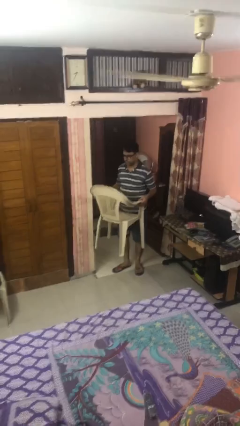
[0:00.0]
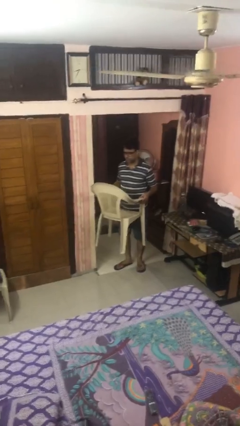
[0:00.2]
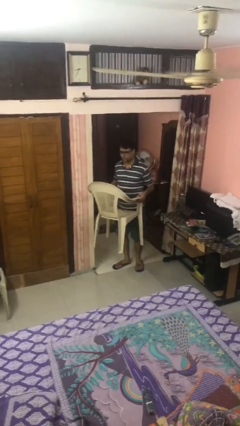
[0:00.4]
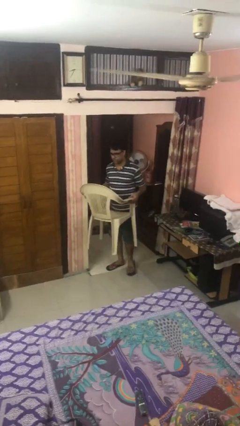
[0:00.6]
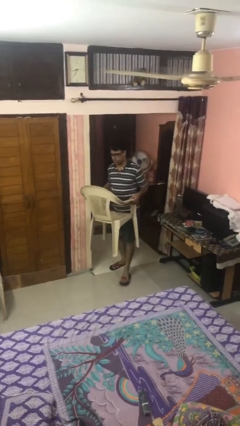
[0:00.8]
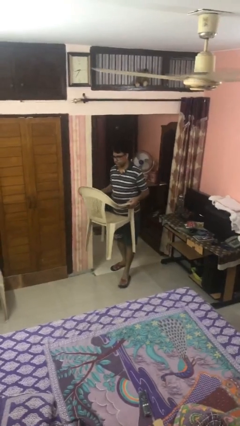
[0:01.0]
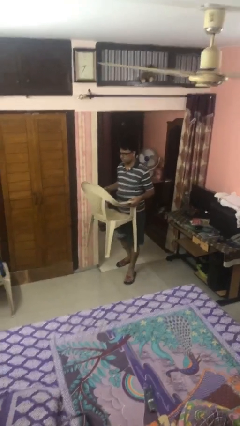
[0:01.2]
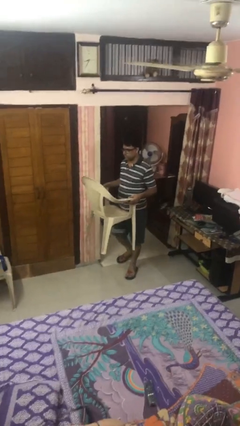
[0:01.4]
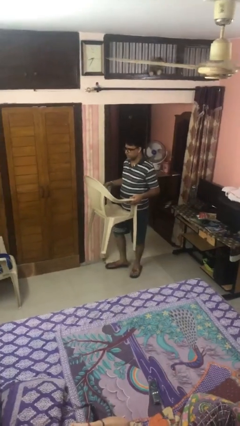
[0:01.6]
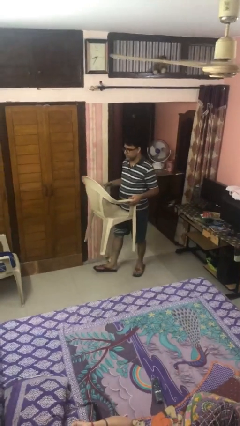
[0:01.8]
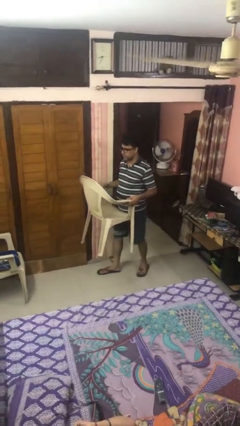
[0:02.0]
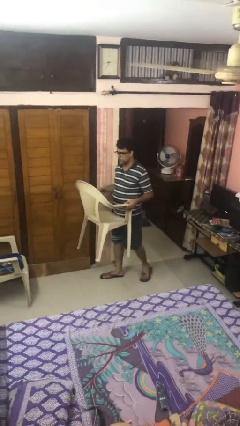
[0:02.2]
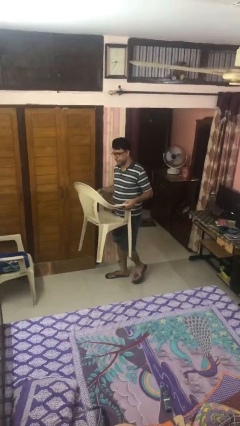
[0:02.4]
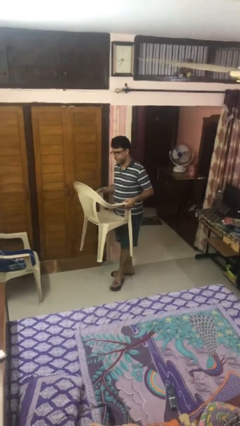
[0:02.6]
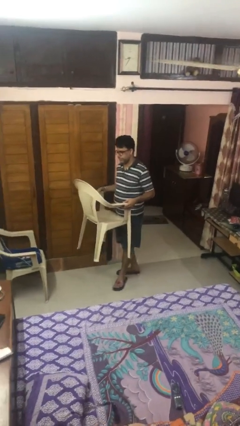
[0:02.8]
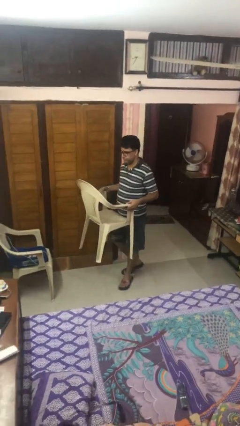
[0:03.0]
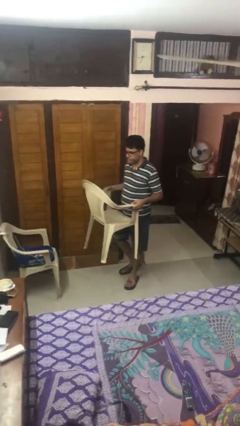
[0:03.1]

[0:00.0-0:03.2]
person carries furniture

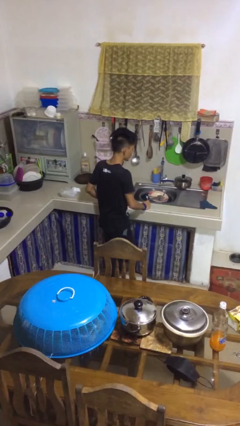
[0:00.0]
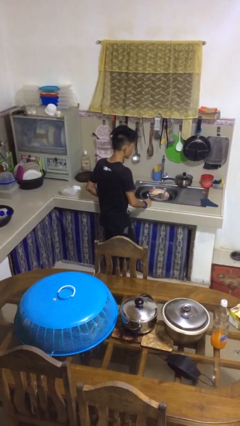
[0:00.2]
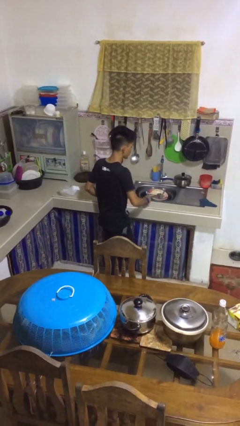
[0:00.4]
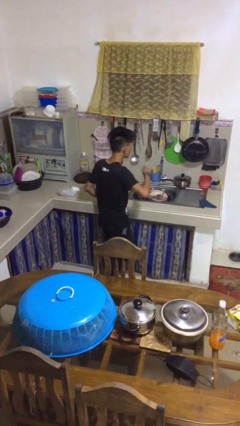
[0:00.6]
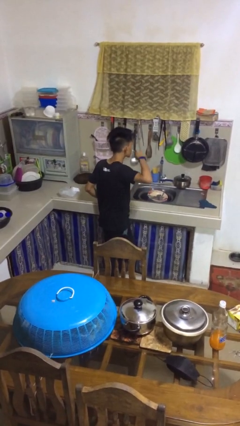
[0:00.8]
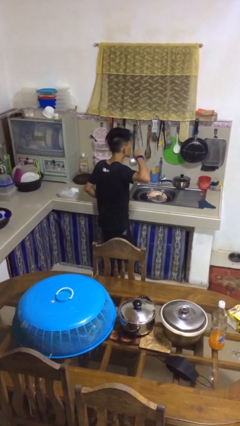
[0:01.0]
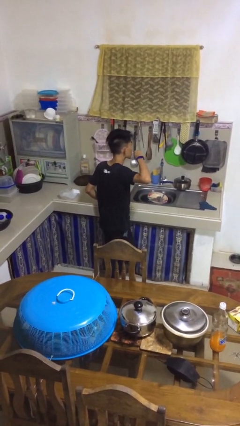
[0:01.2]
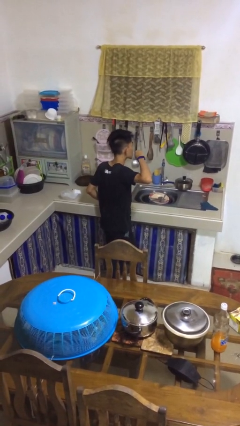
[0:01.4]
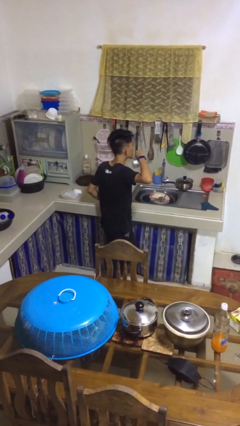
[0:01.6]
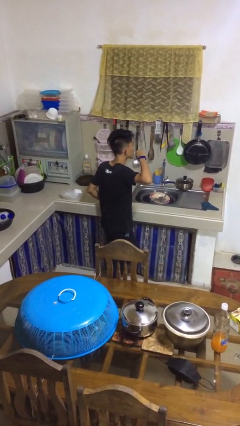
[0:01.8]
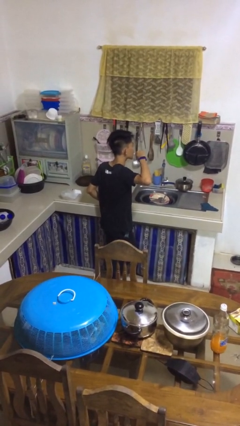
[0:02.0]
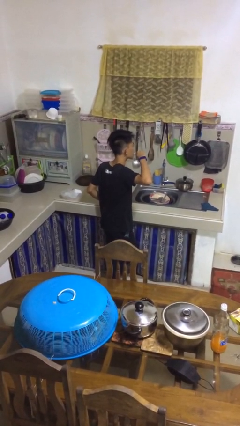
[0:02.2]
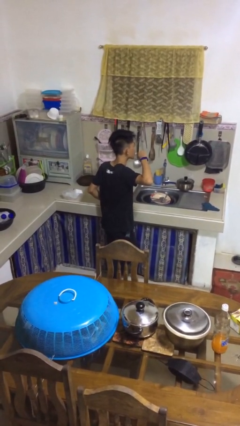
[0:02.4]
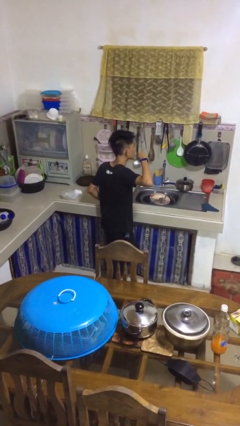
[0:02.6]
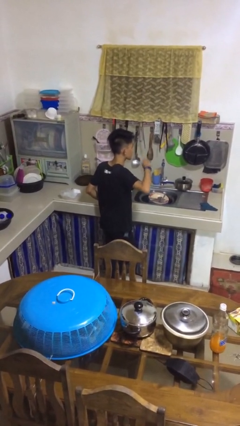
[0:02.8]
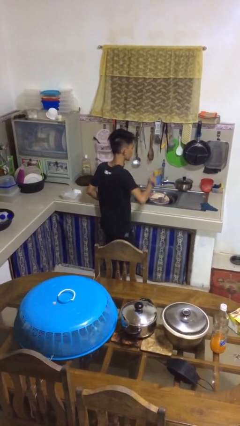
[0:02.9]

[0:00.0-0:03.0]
person brushes teeth

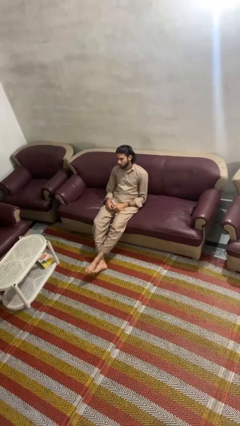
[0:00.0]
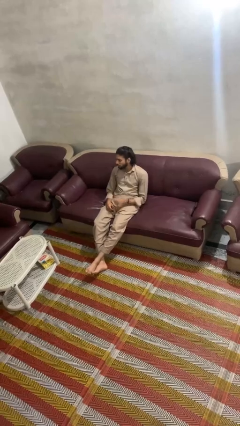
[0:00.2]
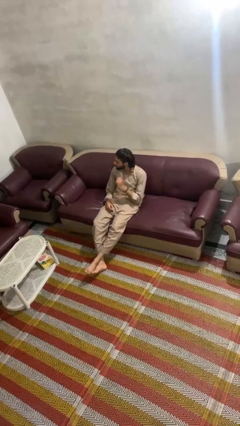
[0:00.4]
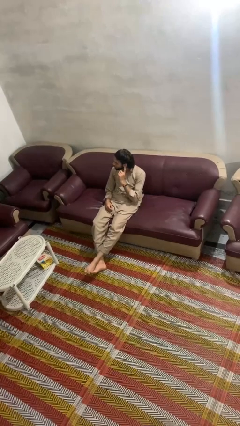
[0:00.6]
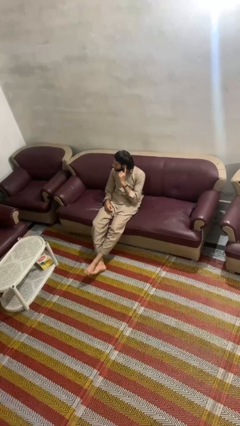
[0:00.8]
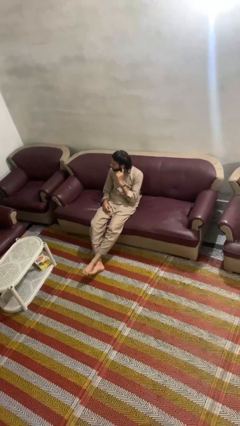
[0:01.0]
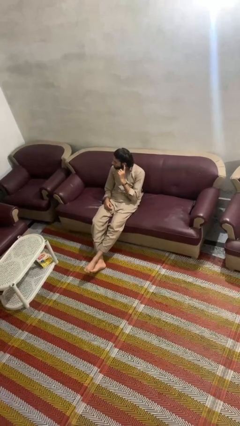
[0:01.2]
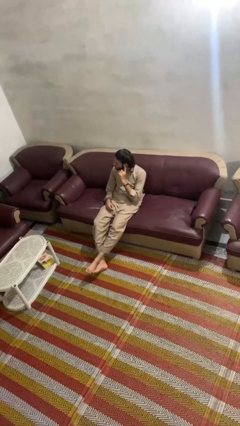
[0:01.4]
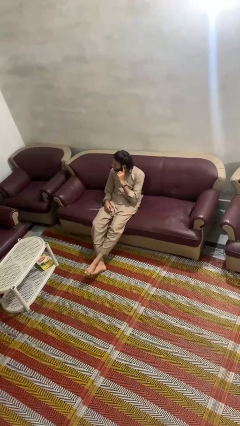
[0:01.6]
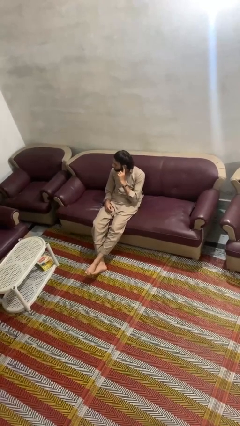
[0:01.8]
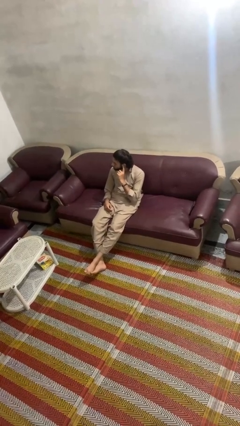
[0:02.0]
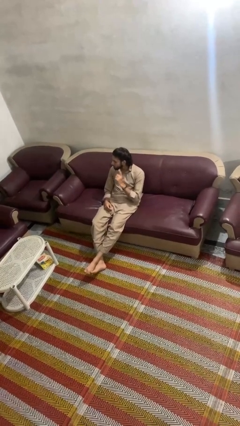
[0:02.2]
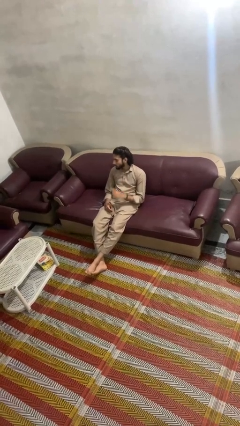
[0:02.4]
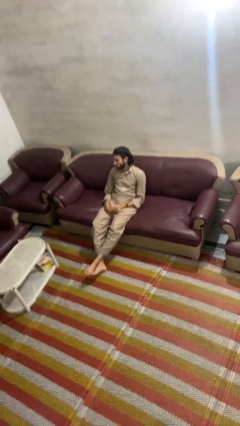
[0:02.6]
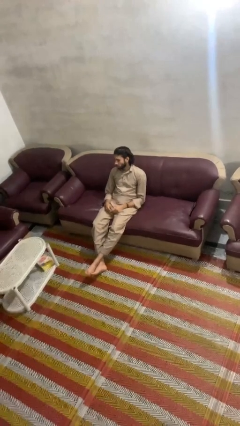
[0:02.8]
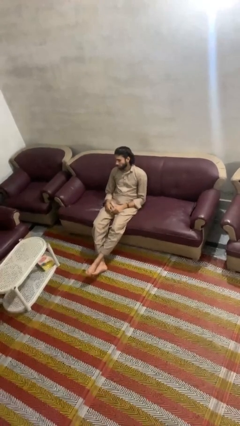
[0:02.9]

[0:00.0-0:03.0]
person gestures listen closely

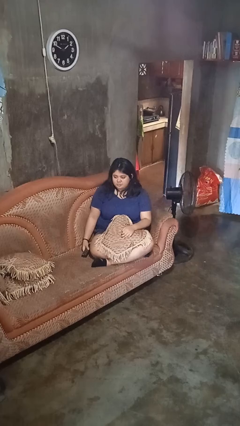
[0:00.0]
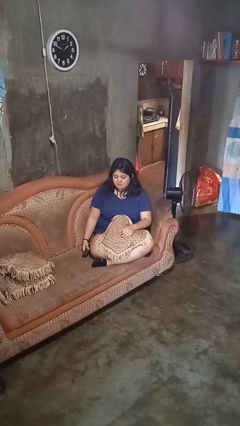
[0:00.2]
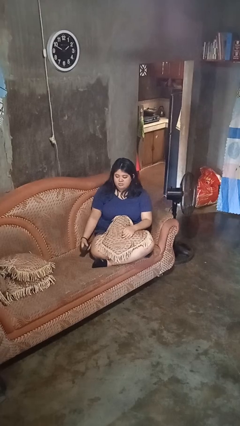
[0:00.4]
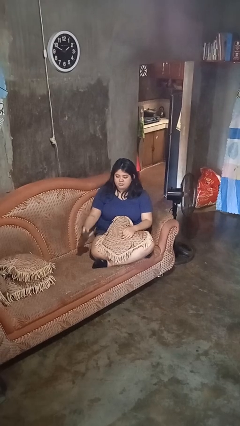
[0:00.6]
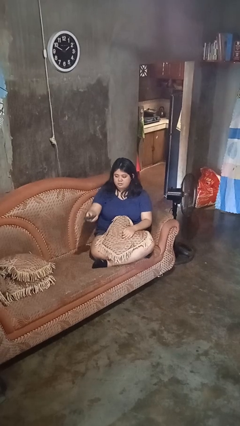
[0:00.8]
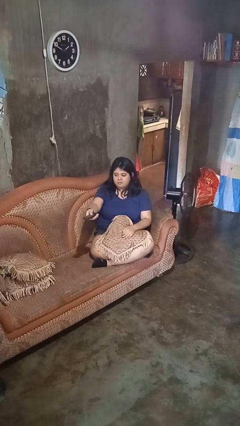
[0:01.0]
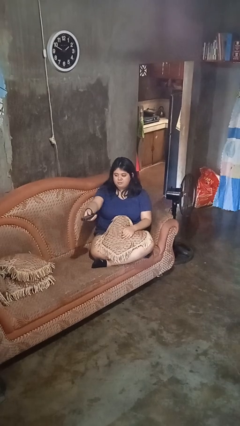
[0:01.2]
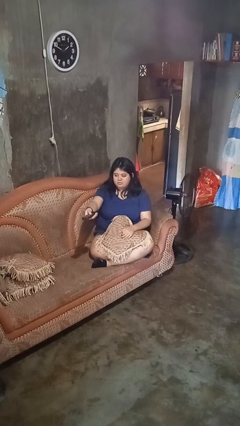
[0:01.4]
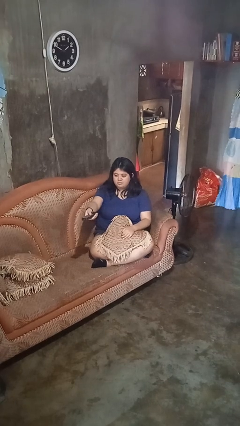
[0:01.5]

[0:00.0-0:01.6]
person uses television remote

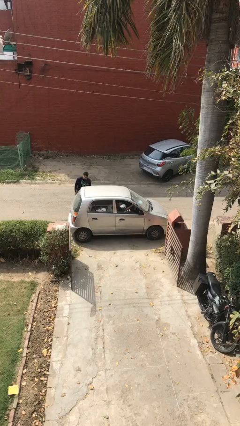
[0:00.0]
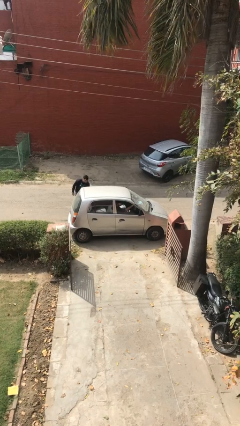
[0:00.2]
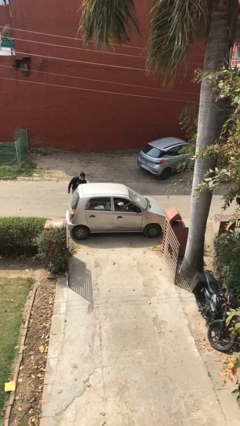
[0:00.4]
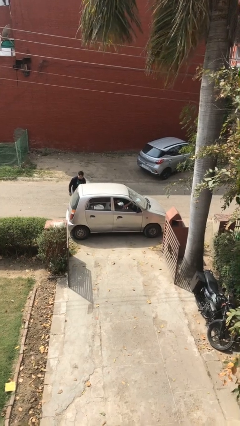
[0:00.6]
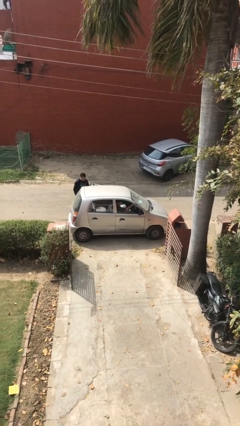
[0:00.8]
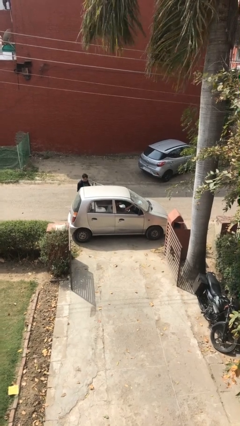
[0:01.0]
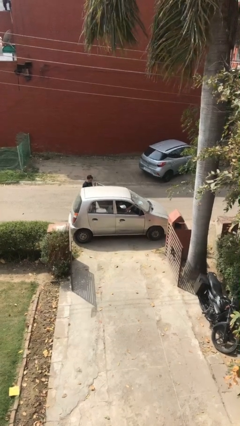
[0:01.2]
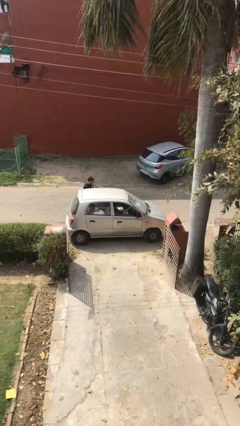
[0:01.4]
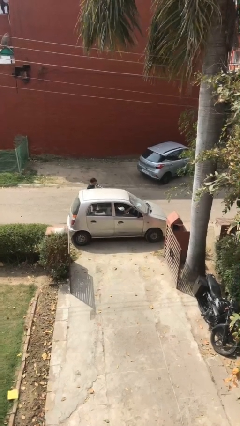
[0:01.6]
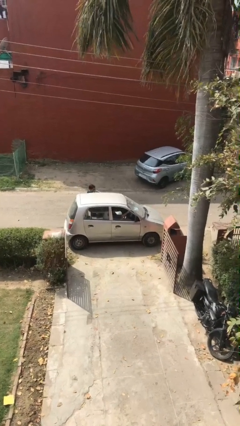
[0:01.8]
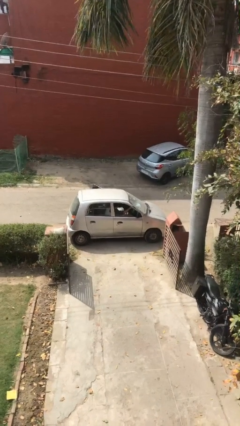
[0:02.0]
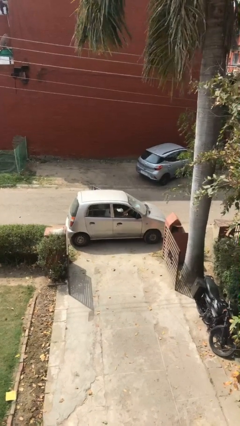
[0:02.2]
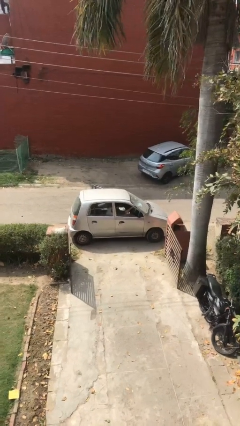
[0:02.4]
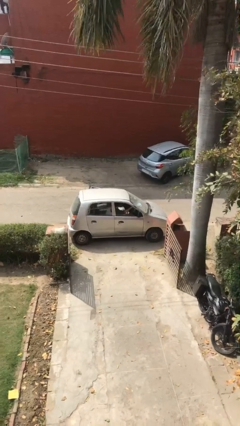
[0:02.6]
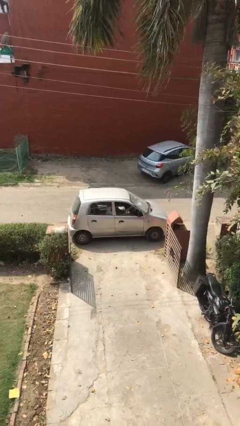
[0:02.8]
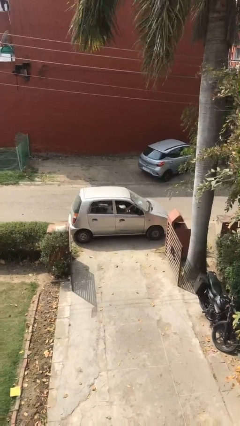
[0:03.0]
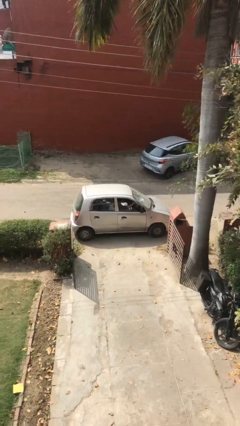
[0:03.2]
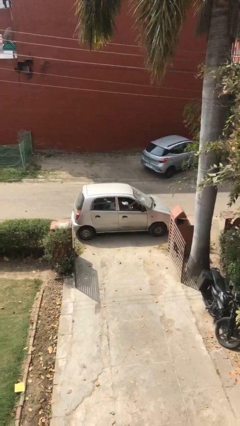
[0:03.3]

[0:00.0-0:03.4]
car picks up person

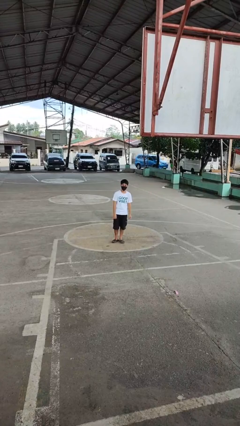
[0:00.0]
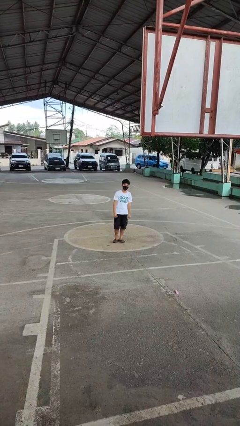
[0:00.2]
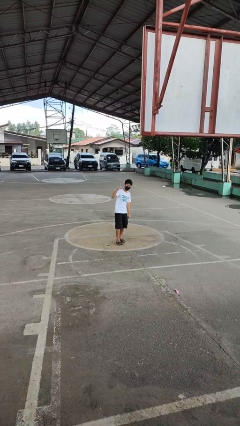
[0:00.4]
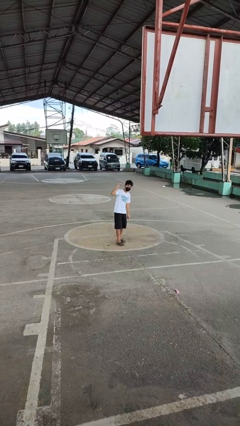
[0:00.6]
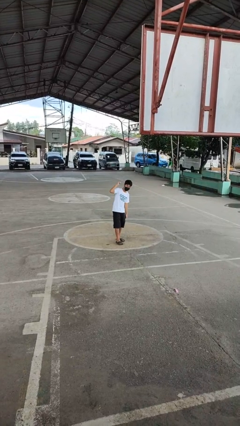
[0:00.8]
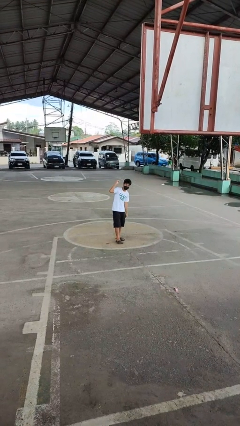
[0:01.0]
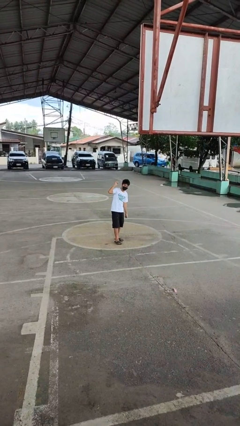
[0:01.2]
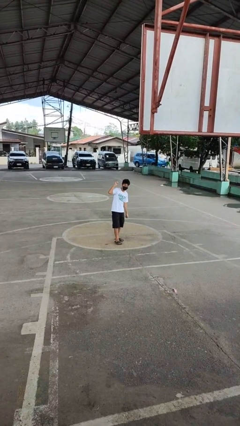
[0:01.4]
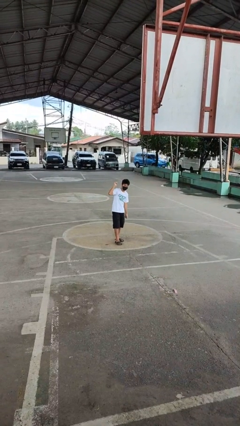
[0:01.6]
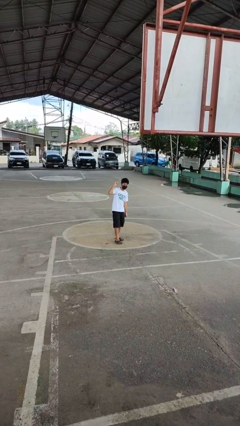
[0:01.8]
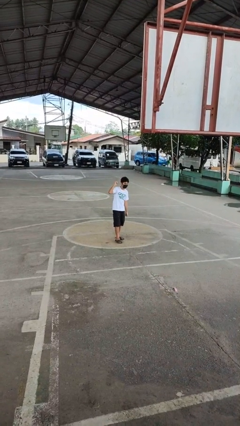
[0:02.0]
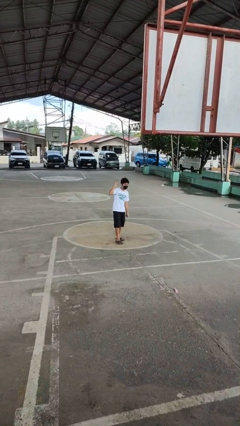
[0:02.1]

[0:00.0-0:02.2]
person gestures behind me

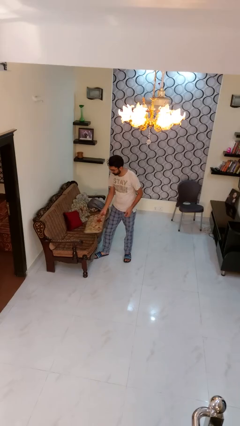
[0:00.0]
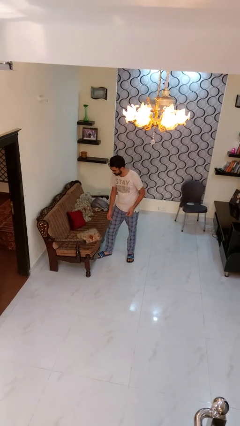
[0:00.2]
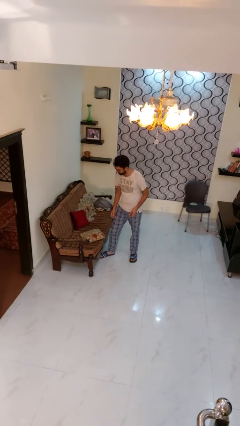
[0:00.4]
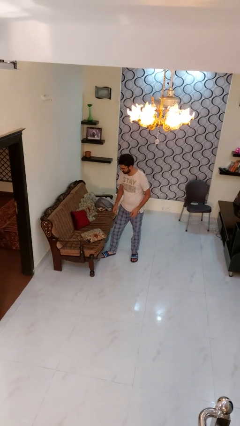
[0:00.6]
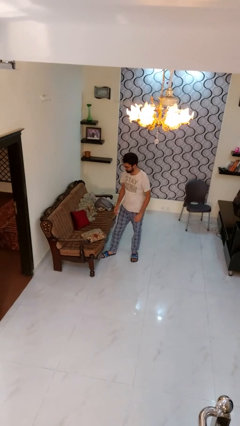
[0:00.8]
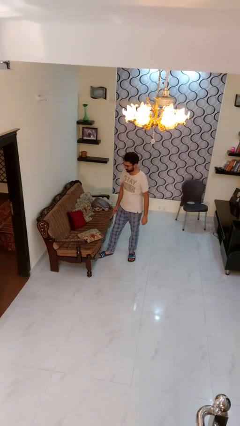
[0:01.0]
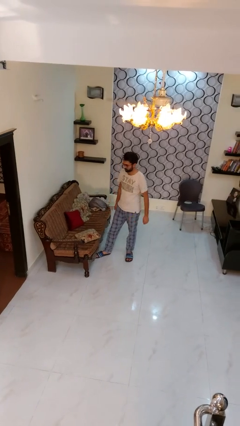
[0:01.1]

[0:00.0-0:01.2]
person puts down object on couch
